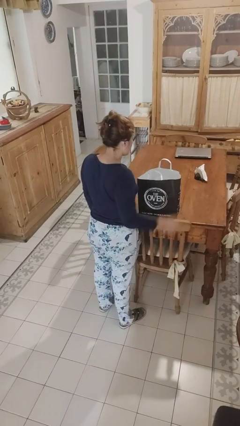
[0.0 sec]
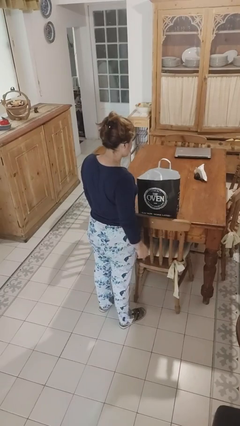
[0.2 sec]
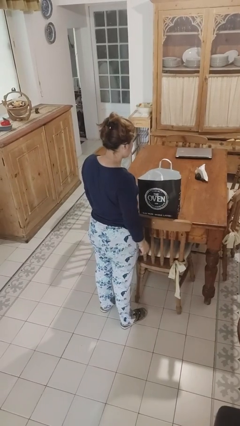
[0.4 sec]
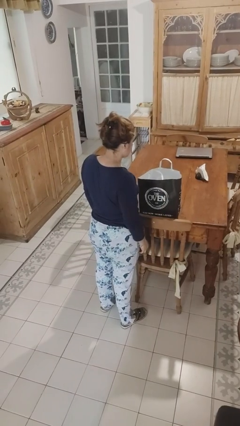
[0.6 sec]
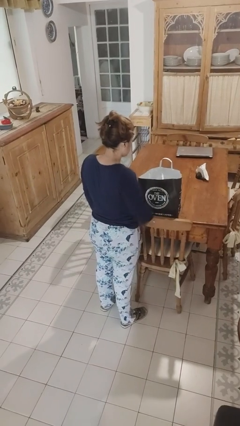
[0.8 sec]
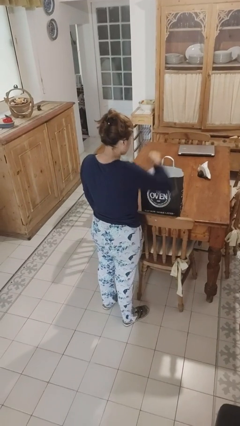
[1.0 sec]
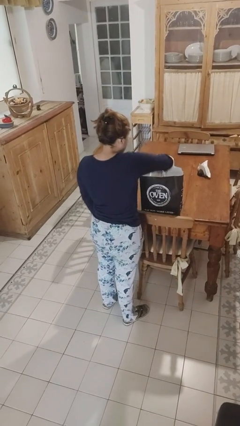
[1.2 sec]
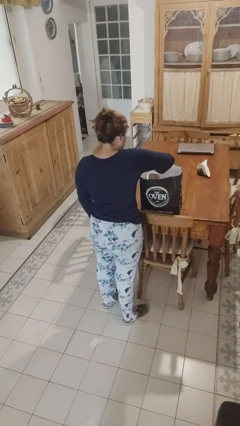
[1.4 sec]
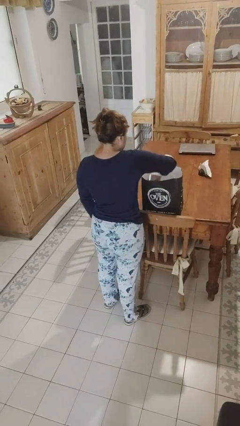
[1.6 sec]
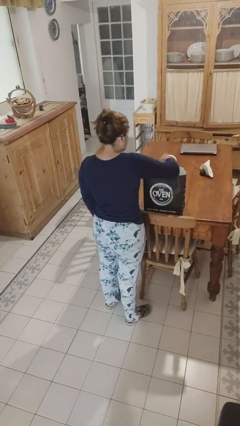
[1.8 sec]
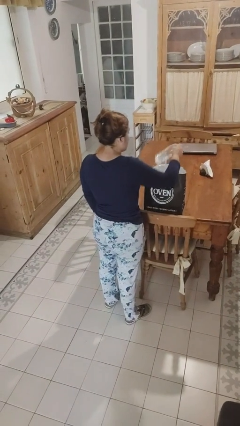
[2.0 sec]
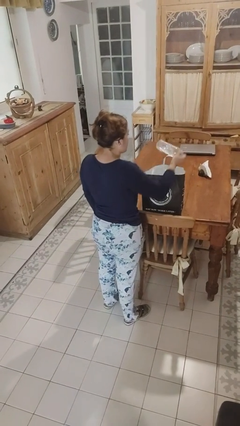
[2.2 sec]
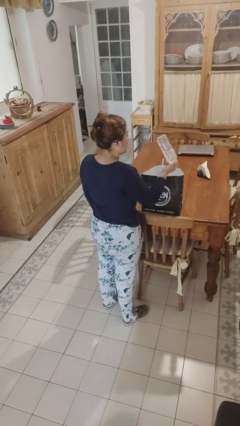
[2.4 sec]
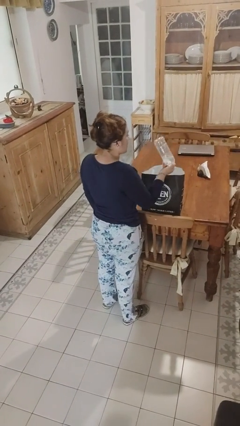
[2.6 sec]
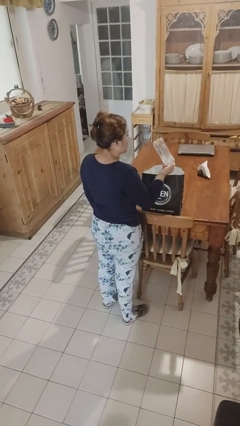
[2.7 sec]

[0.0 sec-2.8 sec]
person takes object from bag

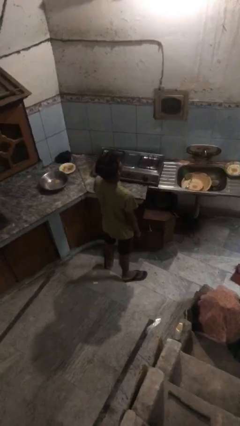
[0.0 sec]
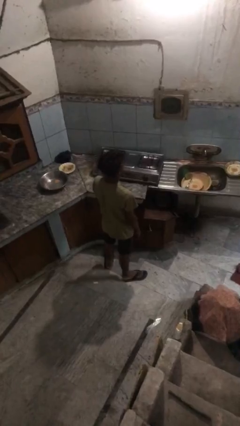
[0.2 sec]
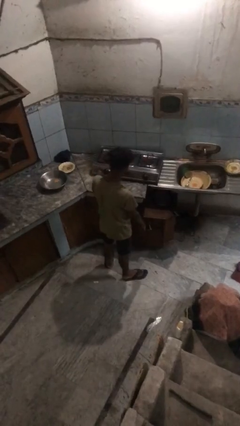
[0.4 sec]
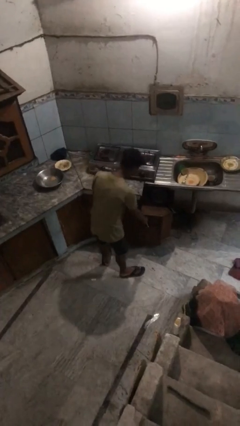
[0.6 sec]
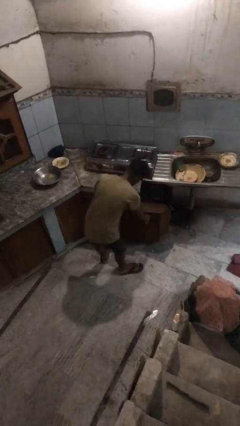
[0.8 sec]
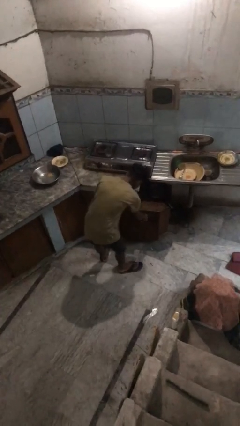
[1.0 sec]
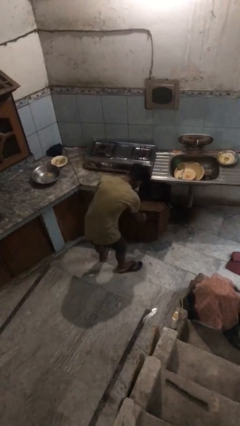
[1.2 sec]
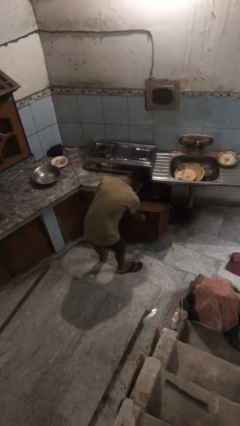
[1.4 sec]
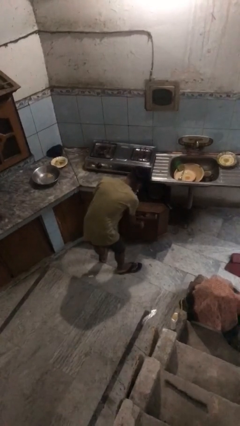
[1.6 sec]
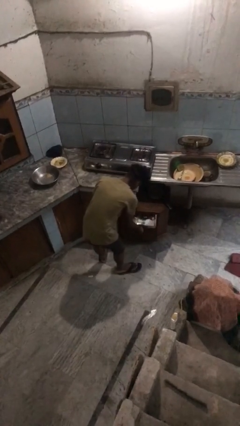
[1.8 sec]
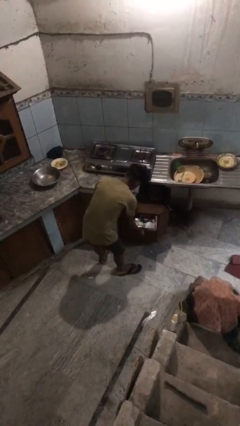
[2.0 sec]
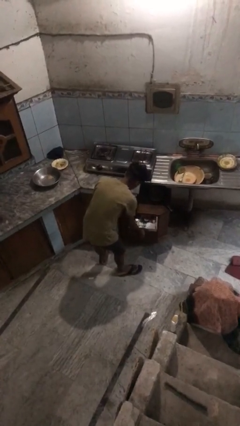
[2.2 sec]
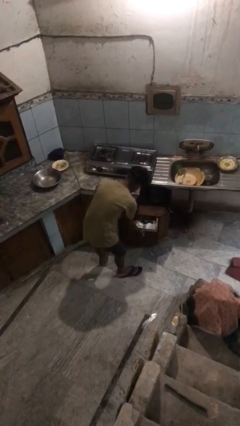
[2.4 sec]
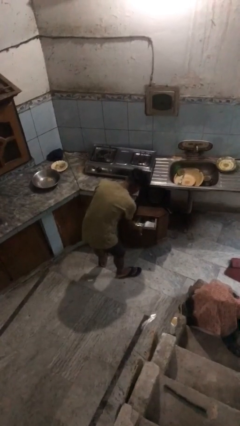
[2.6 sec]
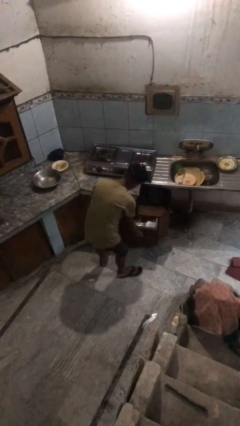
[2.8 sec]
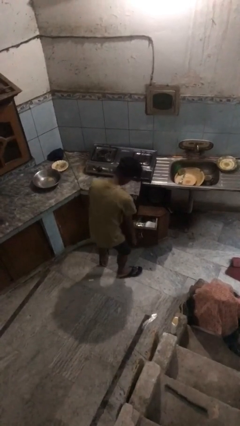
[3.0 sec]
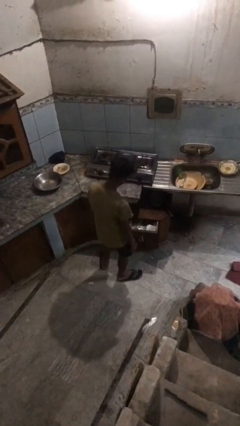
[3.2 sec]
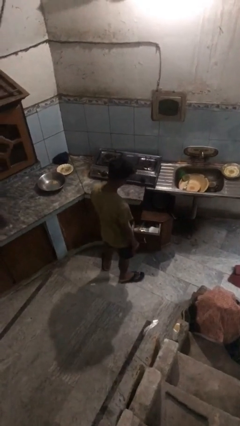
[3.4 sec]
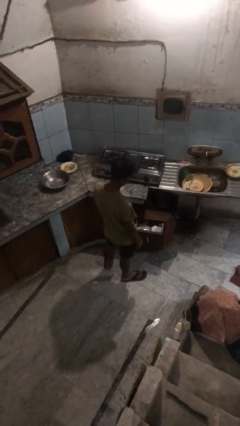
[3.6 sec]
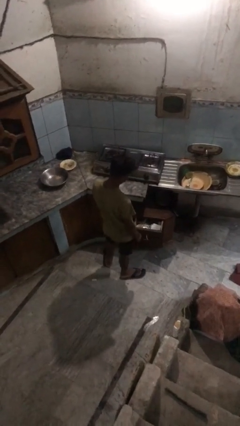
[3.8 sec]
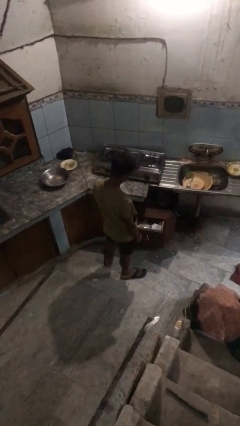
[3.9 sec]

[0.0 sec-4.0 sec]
person opens kitchen drawer

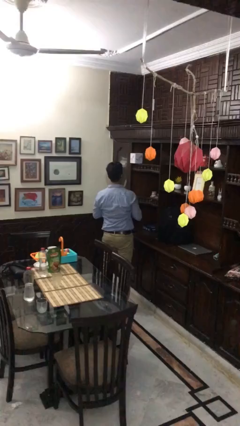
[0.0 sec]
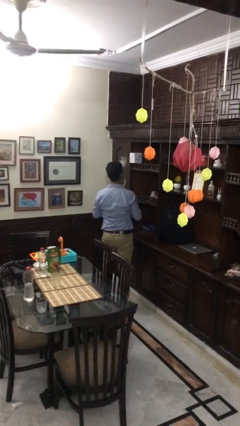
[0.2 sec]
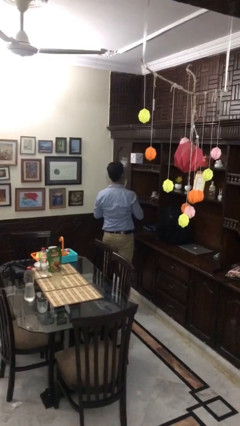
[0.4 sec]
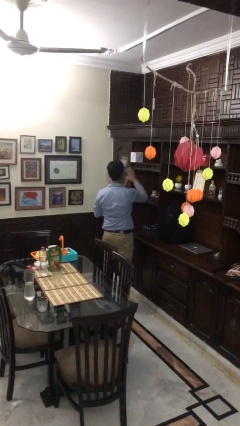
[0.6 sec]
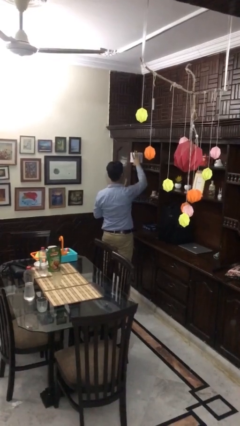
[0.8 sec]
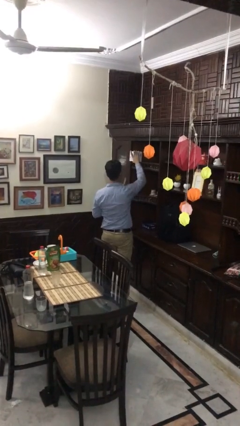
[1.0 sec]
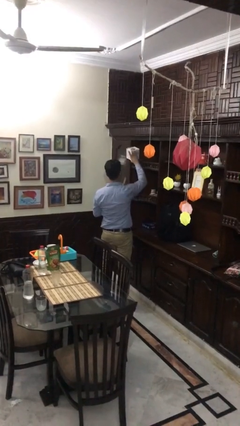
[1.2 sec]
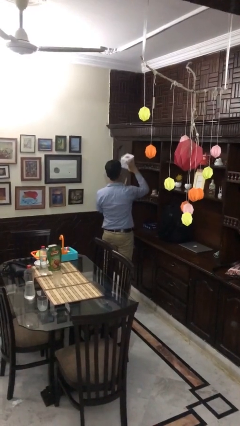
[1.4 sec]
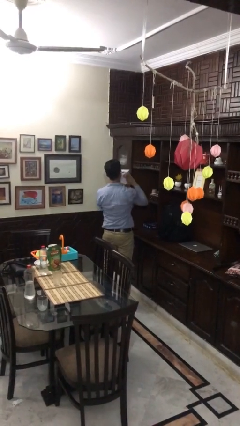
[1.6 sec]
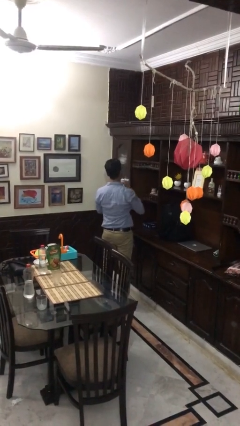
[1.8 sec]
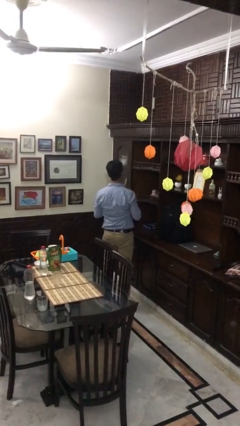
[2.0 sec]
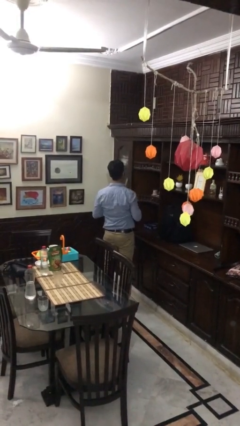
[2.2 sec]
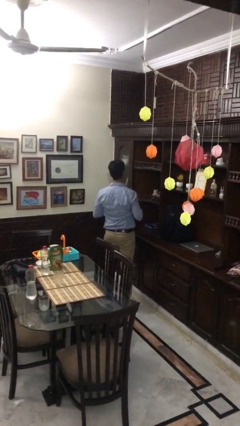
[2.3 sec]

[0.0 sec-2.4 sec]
person picks up object from shelf

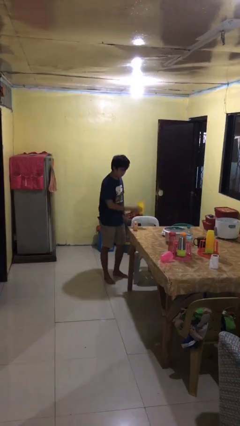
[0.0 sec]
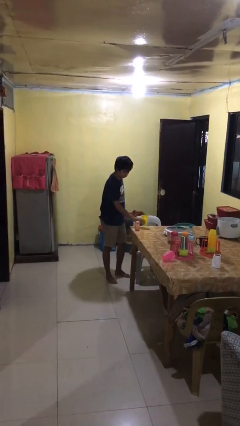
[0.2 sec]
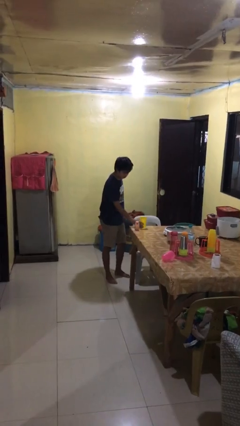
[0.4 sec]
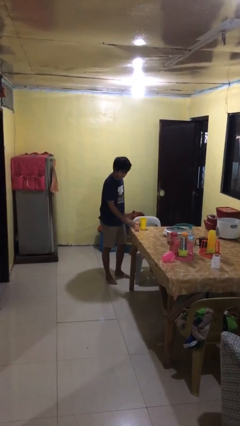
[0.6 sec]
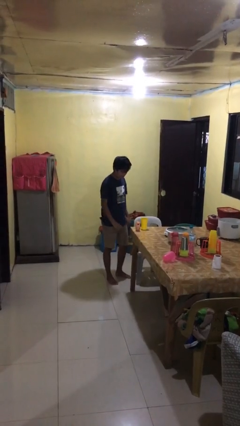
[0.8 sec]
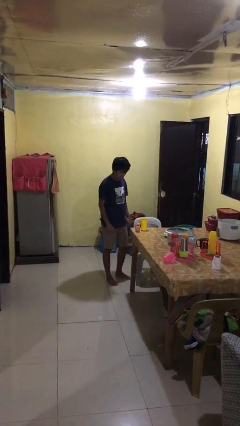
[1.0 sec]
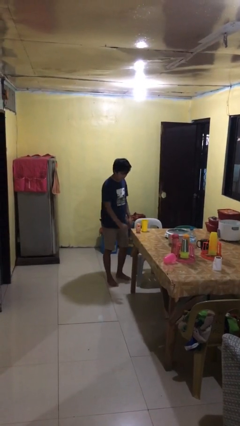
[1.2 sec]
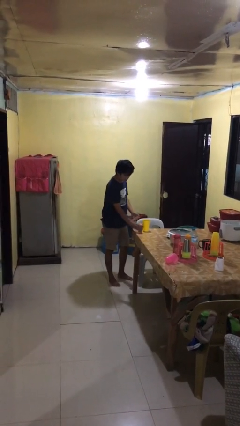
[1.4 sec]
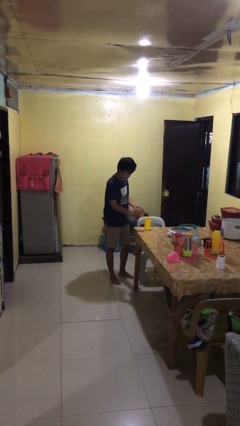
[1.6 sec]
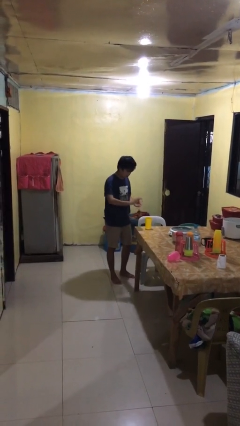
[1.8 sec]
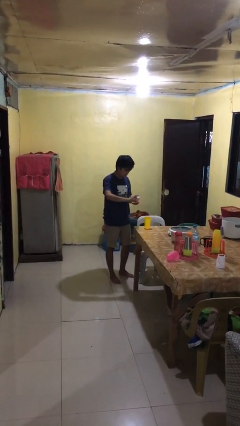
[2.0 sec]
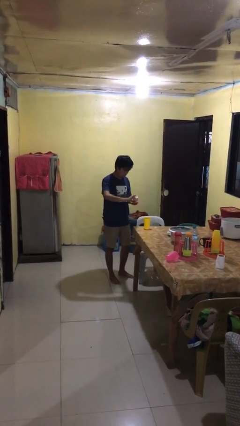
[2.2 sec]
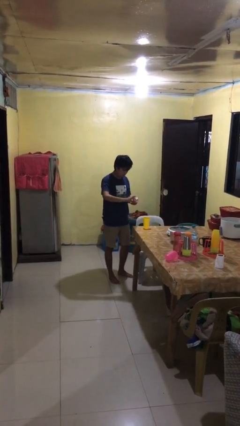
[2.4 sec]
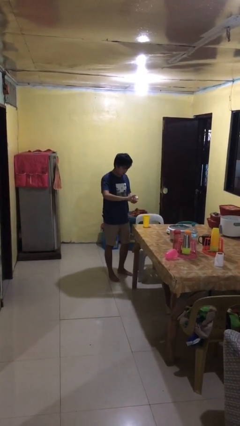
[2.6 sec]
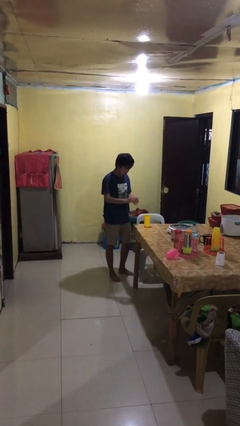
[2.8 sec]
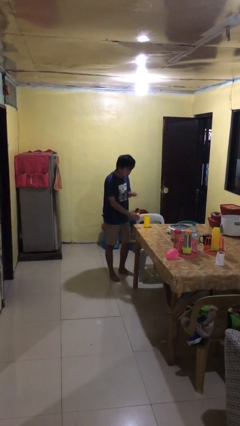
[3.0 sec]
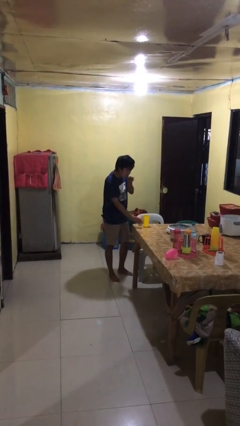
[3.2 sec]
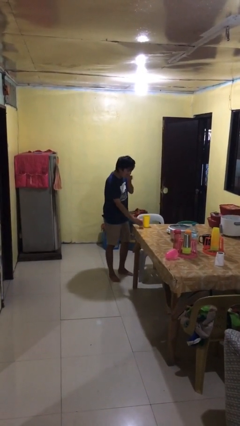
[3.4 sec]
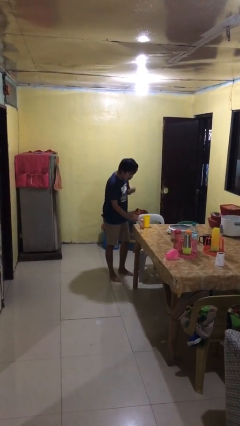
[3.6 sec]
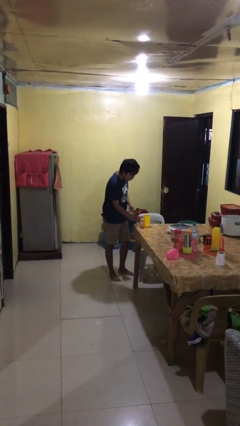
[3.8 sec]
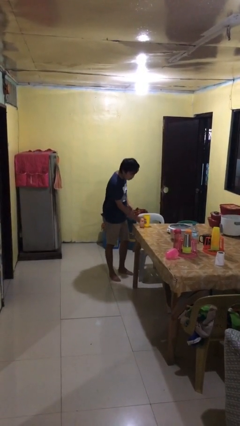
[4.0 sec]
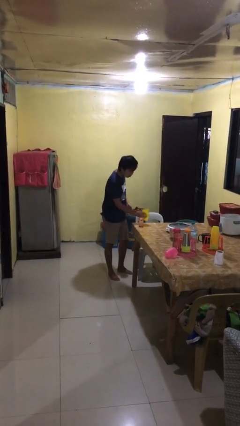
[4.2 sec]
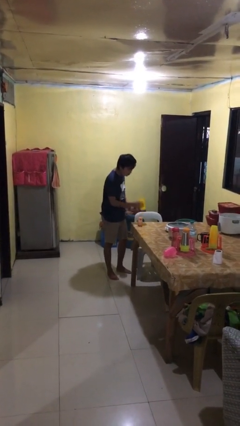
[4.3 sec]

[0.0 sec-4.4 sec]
person takes medicine pills

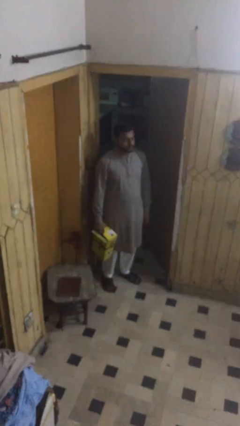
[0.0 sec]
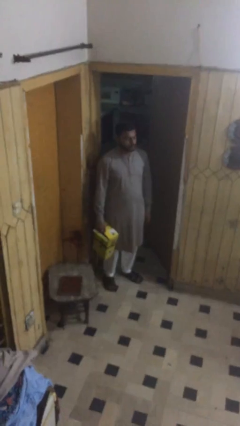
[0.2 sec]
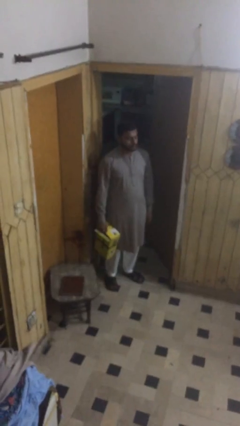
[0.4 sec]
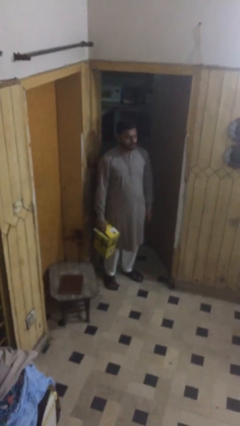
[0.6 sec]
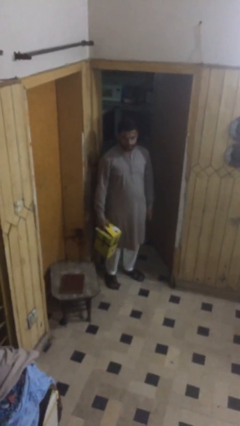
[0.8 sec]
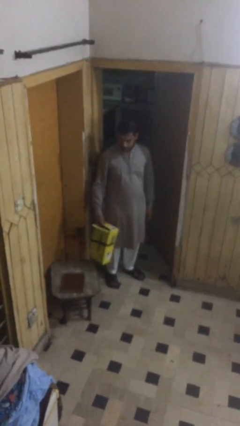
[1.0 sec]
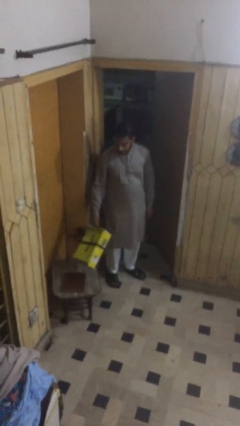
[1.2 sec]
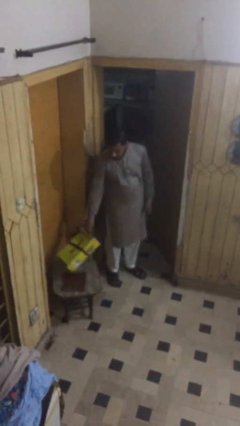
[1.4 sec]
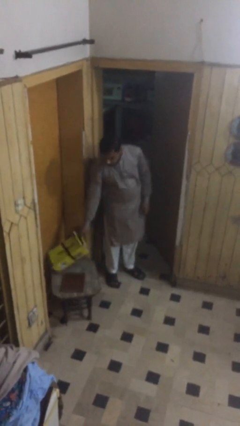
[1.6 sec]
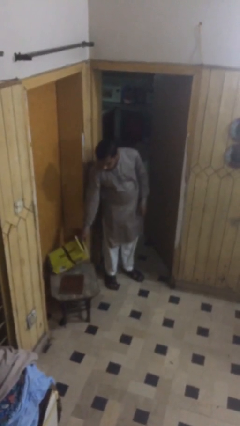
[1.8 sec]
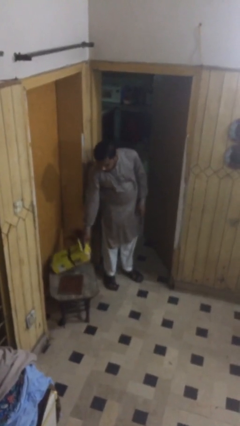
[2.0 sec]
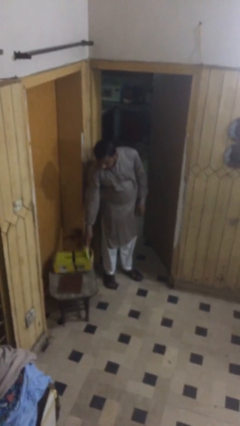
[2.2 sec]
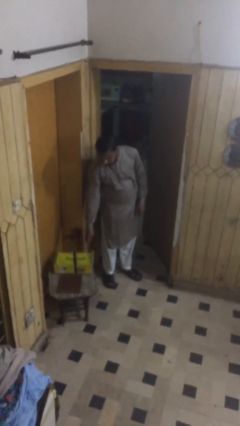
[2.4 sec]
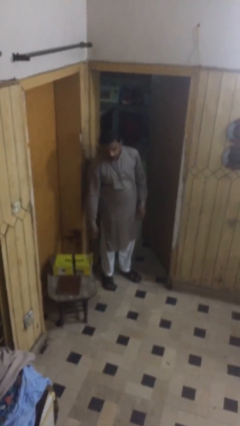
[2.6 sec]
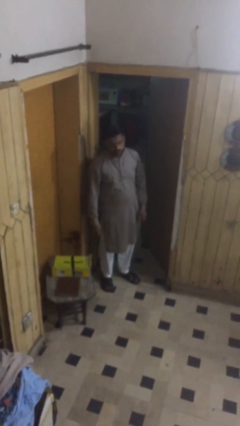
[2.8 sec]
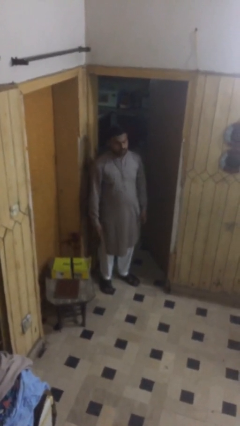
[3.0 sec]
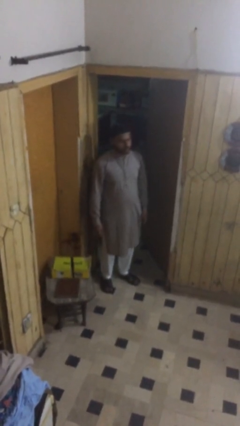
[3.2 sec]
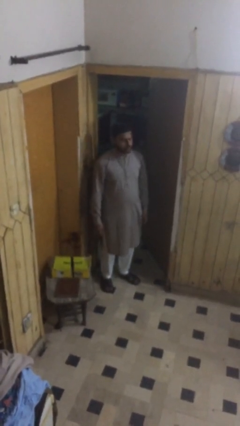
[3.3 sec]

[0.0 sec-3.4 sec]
person puts down object on table

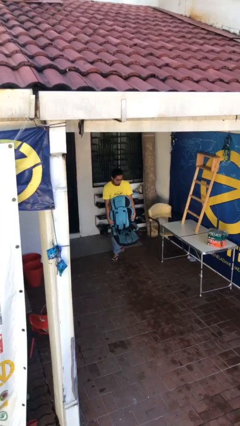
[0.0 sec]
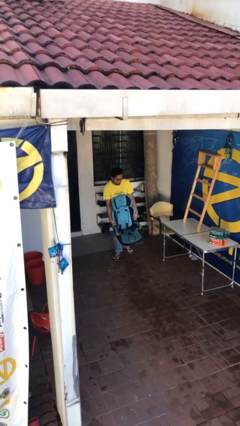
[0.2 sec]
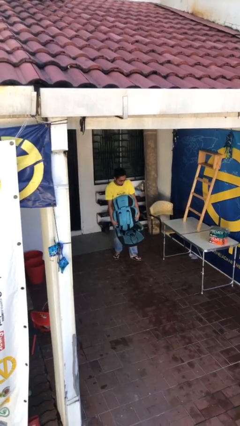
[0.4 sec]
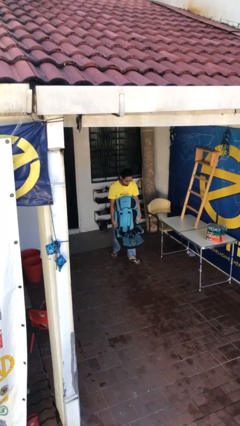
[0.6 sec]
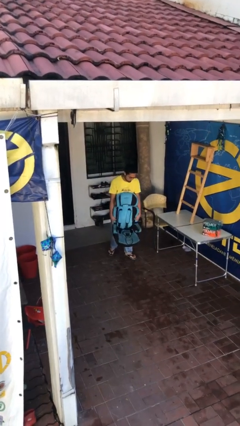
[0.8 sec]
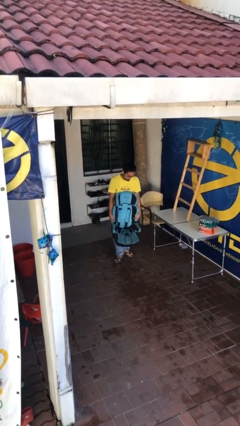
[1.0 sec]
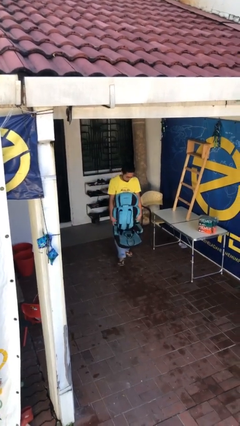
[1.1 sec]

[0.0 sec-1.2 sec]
person carries heavy object
